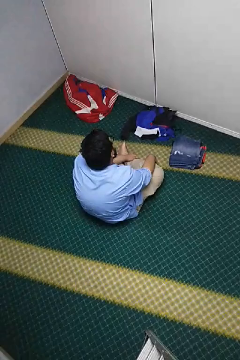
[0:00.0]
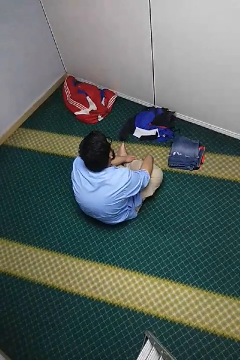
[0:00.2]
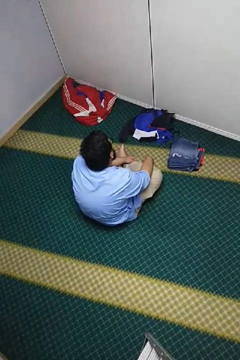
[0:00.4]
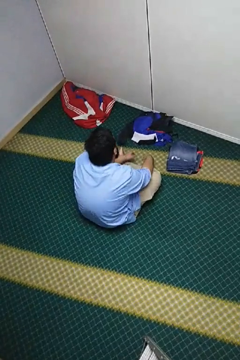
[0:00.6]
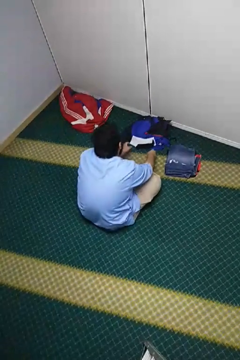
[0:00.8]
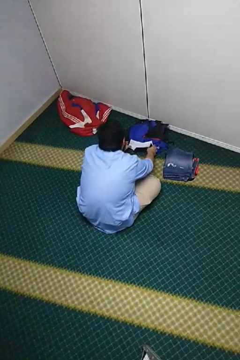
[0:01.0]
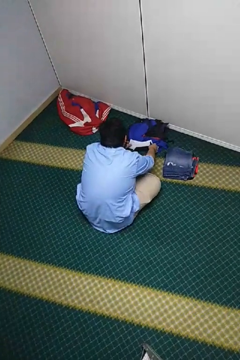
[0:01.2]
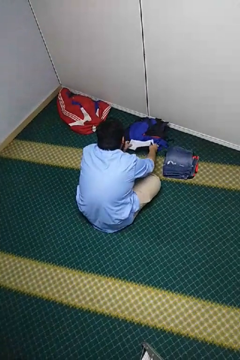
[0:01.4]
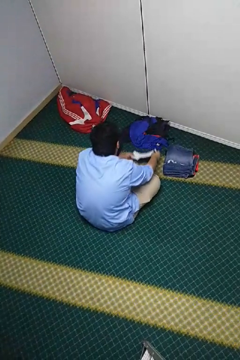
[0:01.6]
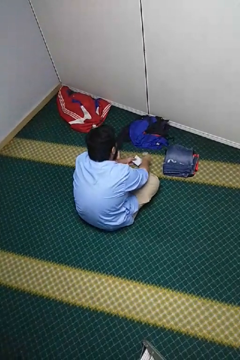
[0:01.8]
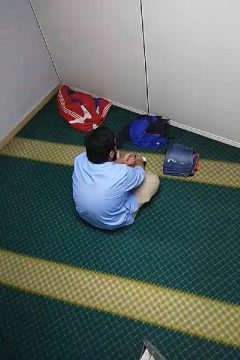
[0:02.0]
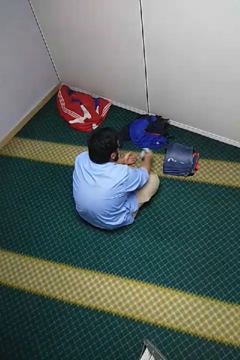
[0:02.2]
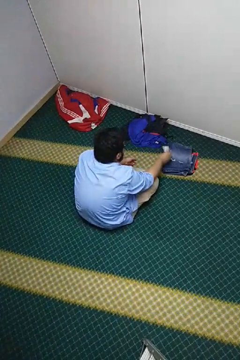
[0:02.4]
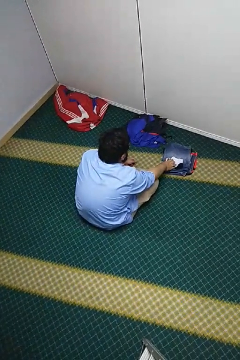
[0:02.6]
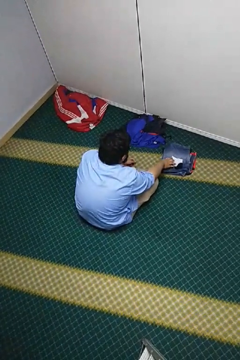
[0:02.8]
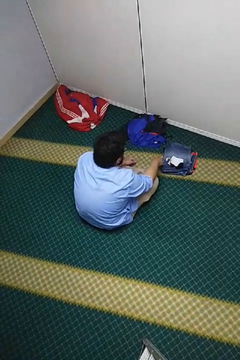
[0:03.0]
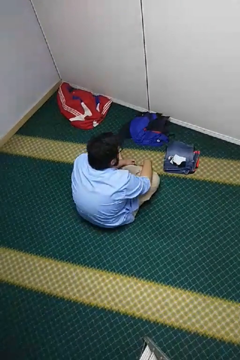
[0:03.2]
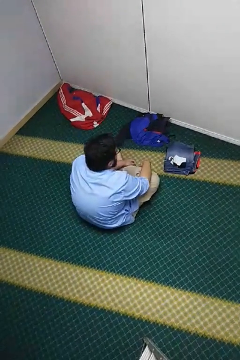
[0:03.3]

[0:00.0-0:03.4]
person folds socks

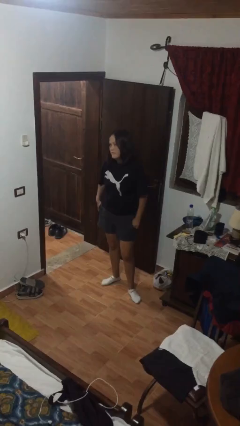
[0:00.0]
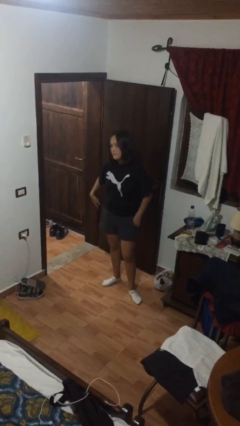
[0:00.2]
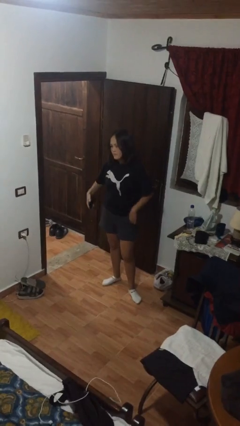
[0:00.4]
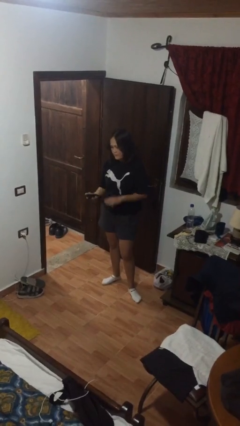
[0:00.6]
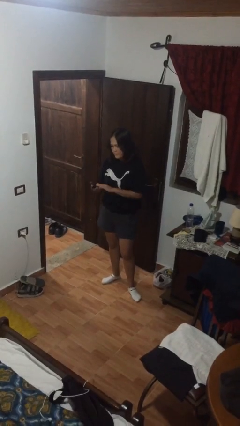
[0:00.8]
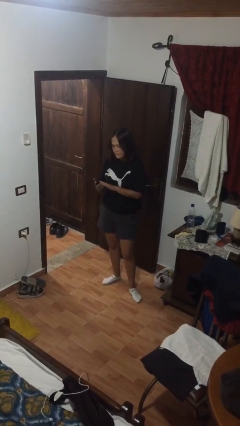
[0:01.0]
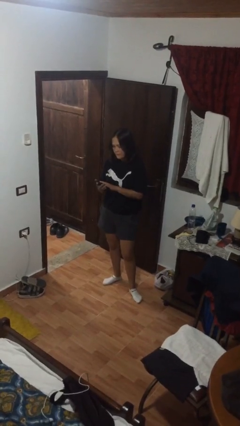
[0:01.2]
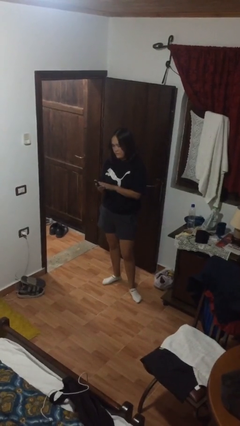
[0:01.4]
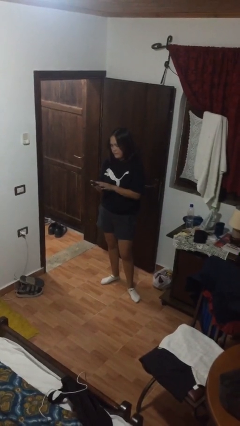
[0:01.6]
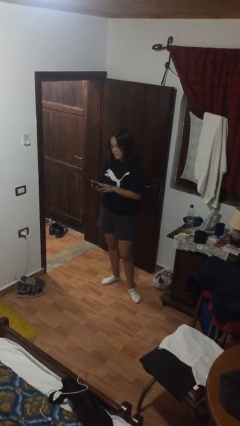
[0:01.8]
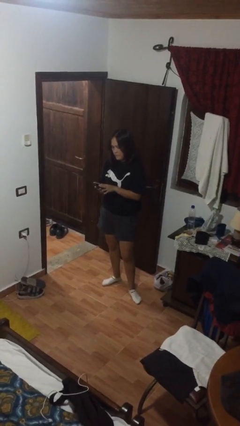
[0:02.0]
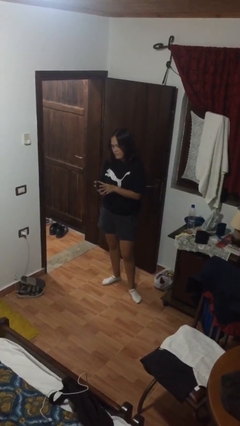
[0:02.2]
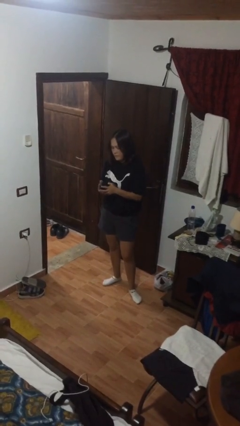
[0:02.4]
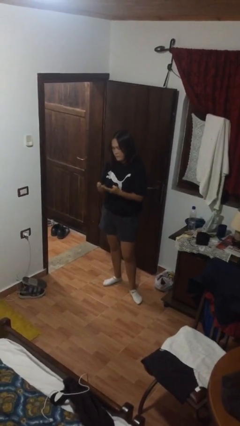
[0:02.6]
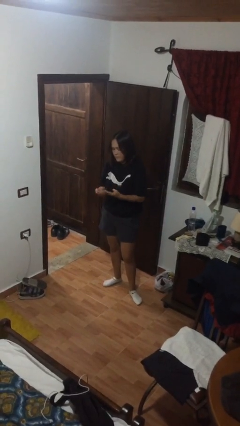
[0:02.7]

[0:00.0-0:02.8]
person takes phone from pocket

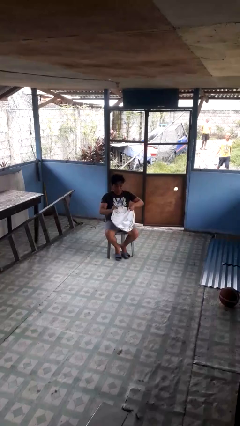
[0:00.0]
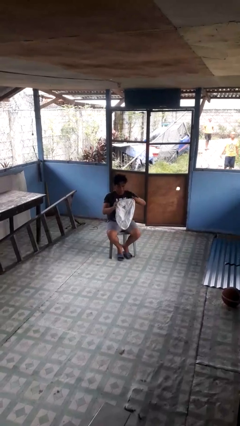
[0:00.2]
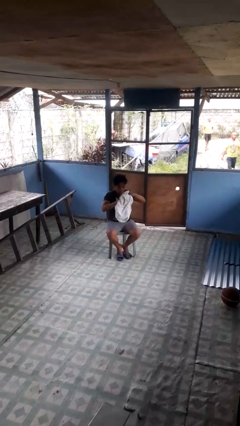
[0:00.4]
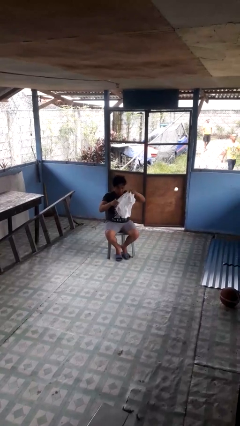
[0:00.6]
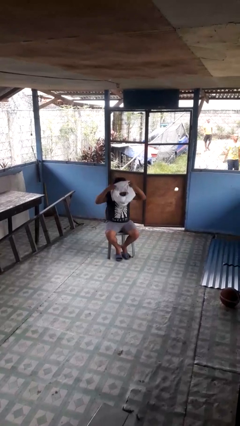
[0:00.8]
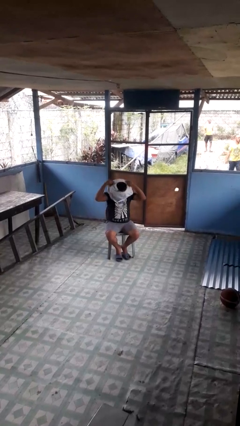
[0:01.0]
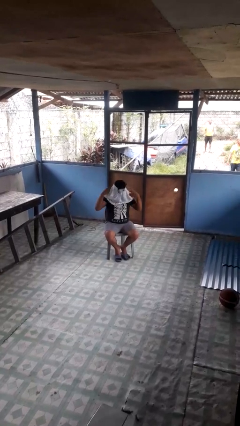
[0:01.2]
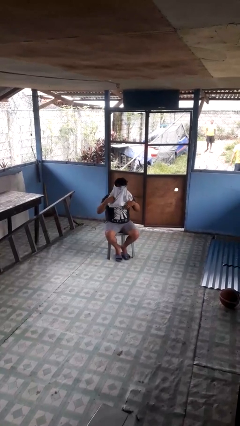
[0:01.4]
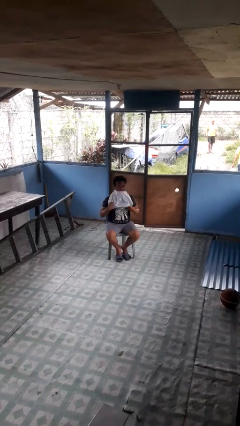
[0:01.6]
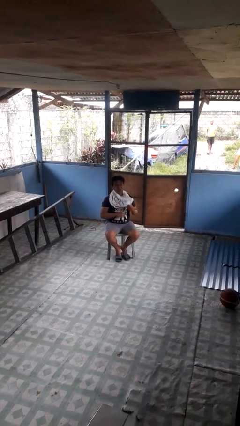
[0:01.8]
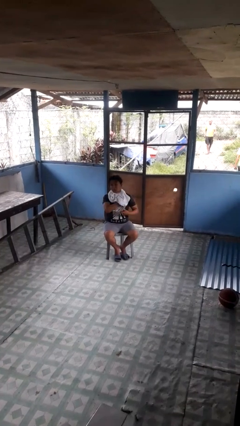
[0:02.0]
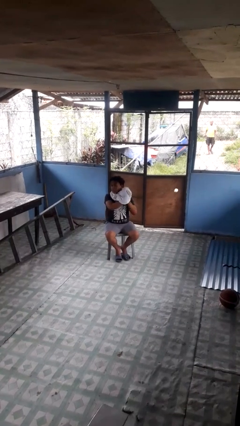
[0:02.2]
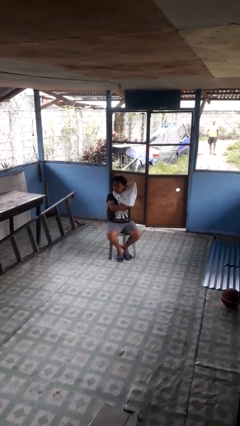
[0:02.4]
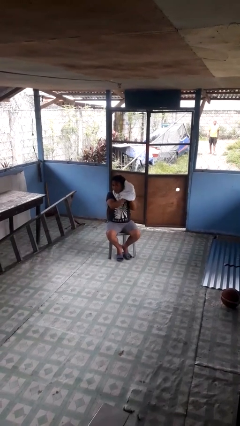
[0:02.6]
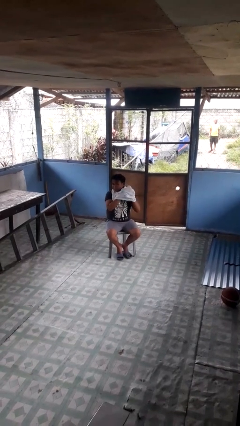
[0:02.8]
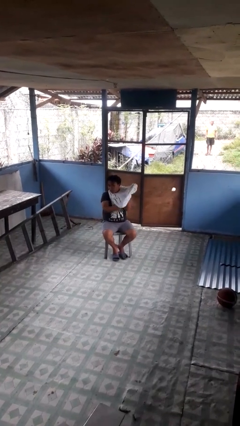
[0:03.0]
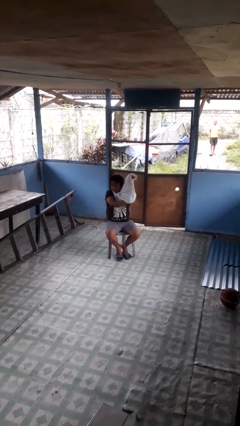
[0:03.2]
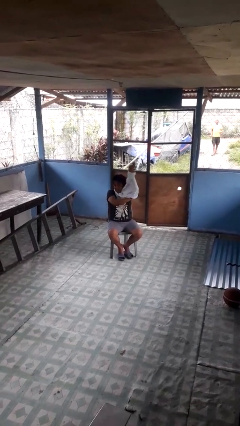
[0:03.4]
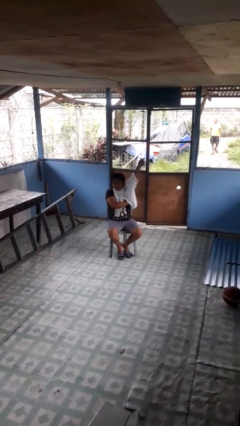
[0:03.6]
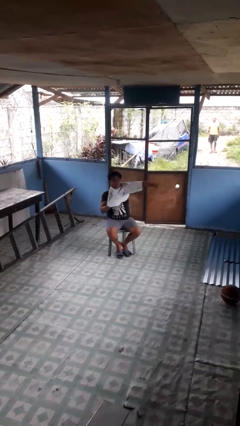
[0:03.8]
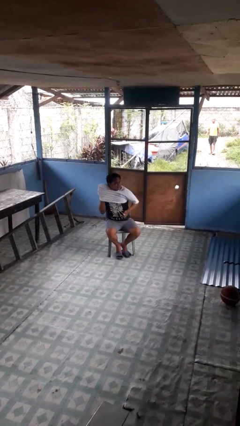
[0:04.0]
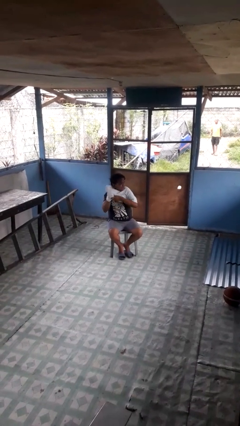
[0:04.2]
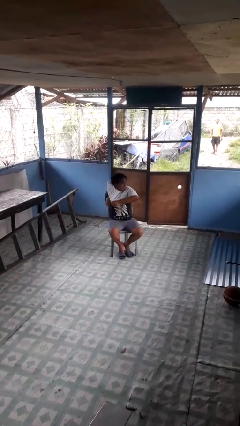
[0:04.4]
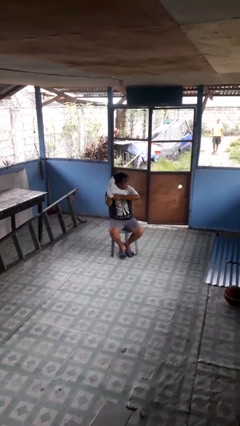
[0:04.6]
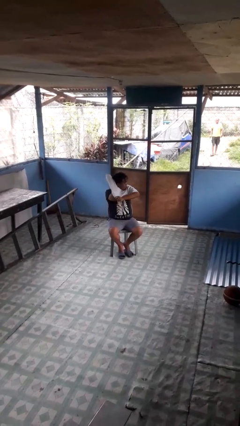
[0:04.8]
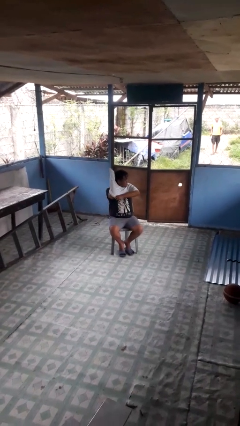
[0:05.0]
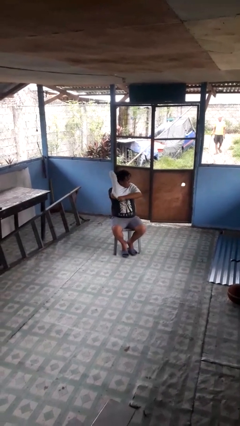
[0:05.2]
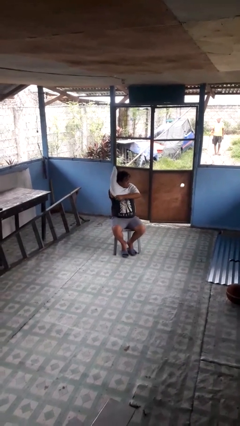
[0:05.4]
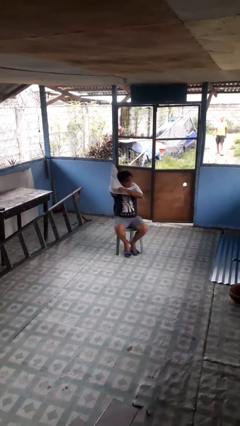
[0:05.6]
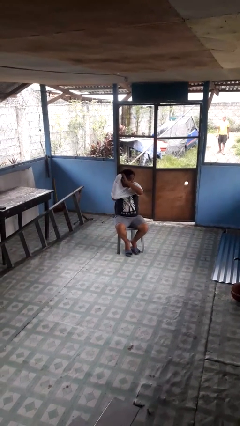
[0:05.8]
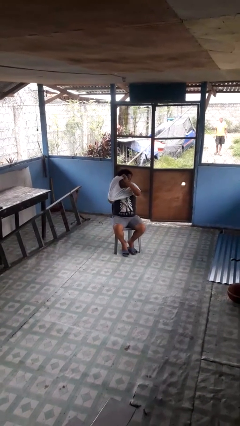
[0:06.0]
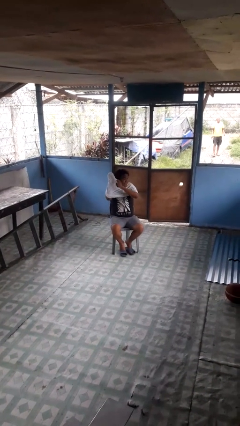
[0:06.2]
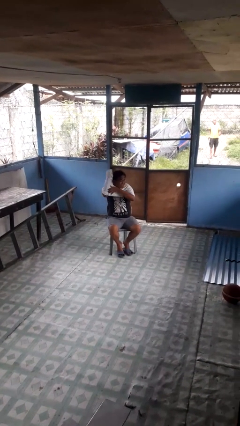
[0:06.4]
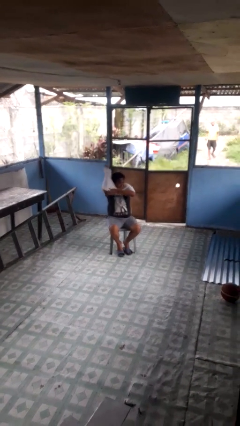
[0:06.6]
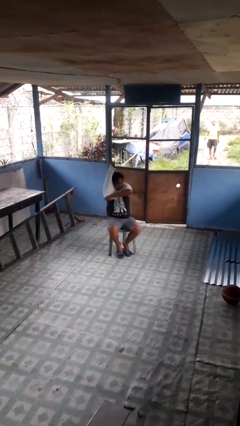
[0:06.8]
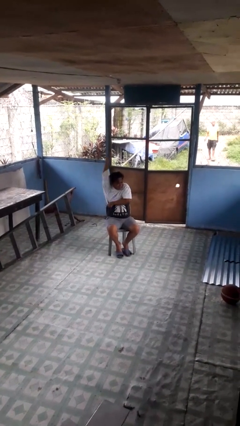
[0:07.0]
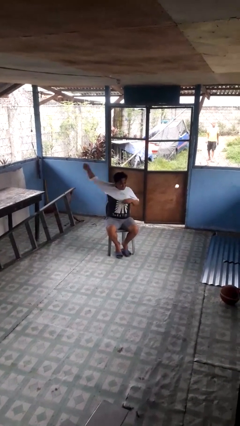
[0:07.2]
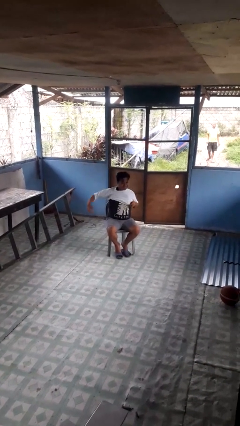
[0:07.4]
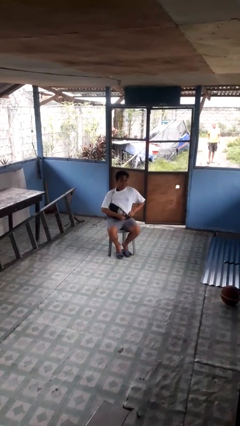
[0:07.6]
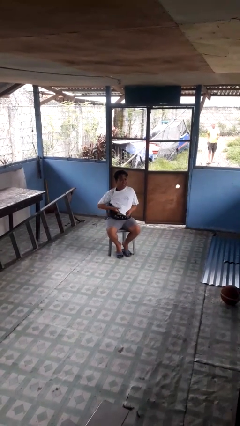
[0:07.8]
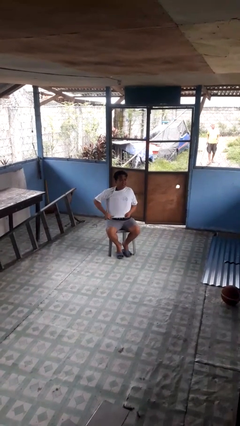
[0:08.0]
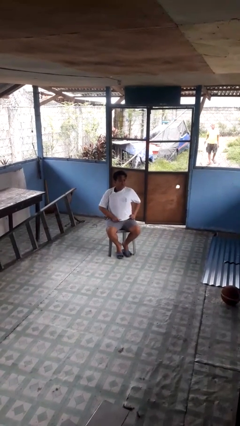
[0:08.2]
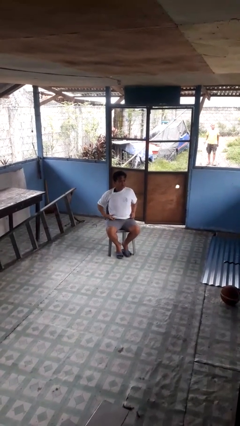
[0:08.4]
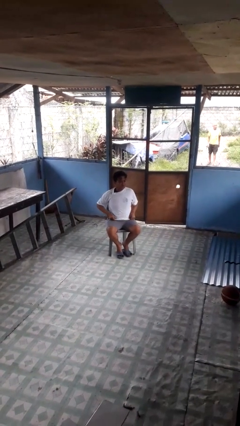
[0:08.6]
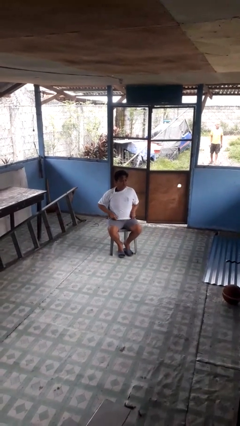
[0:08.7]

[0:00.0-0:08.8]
person puts on shirt

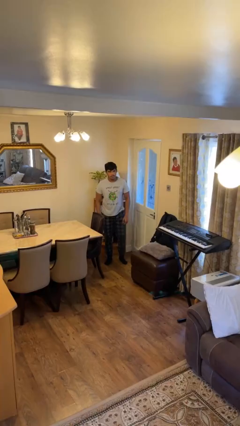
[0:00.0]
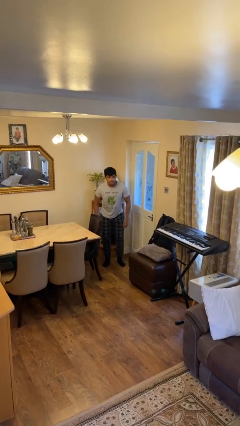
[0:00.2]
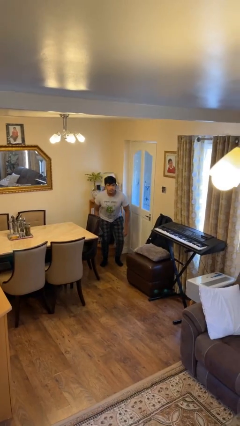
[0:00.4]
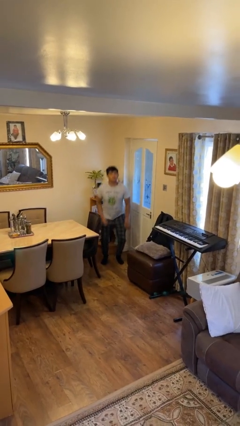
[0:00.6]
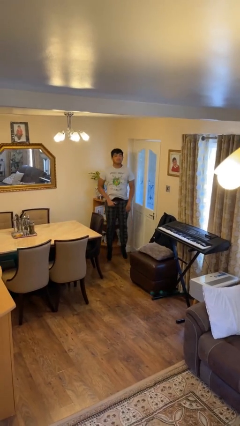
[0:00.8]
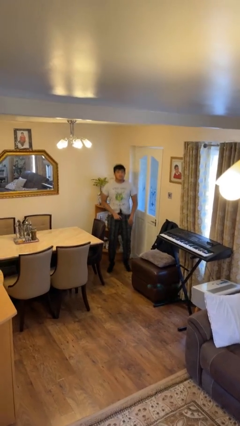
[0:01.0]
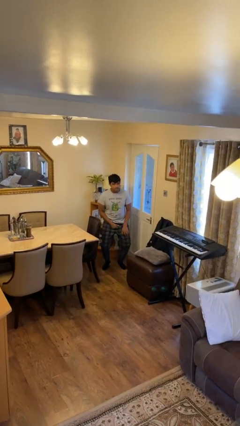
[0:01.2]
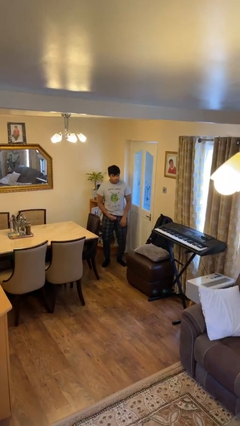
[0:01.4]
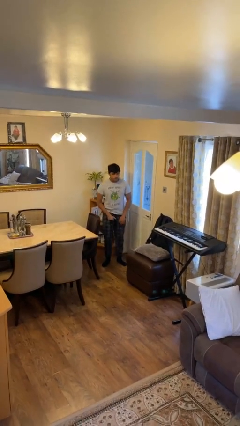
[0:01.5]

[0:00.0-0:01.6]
person jumps

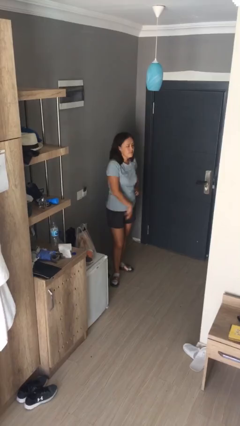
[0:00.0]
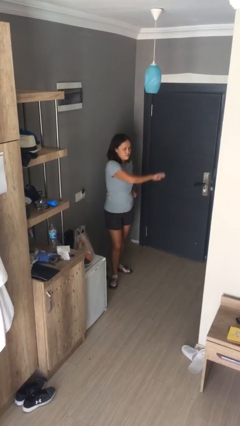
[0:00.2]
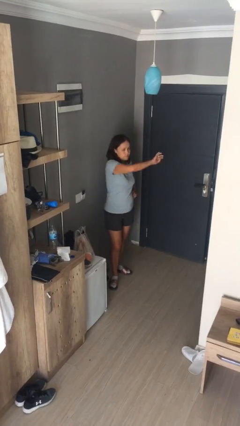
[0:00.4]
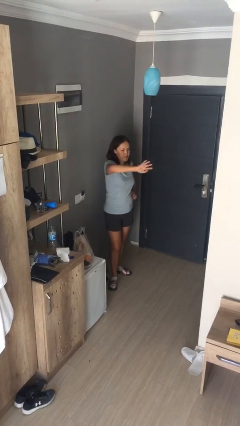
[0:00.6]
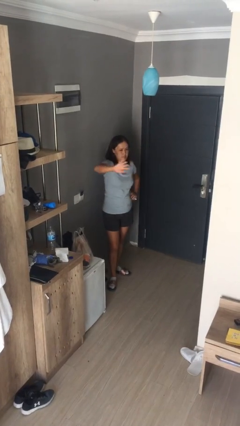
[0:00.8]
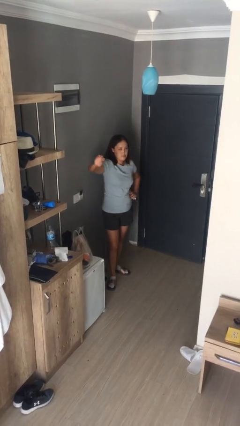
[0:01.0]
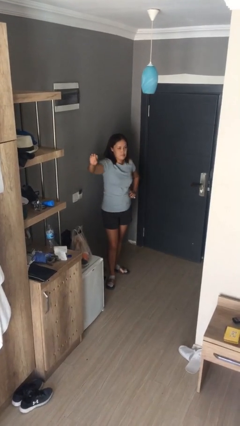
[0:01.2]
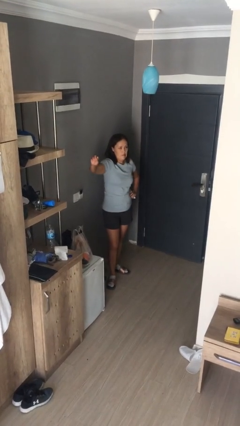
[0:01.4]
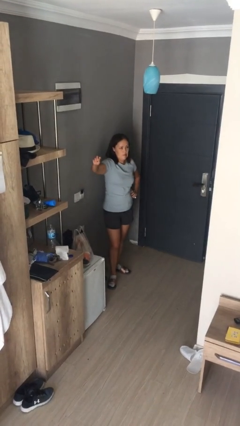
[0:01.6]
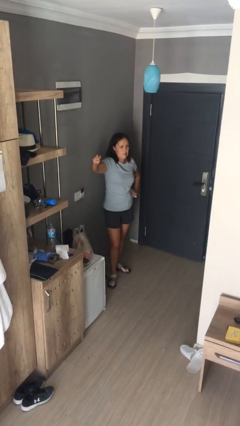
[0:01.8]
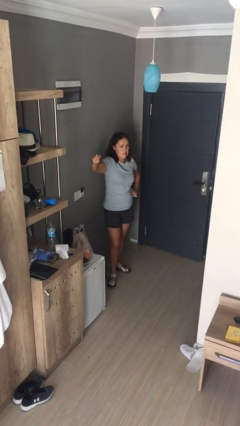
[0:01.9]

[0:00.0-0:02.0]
person gestures swipe left
